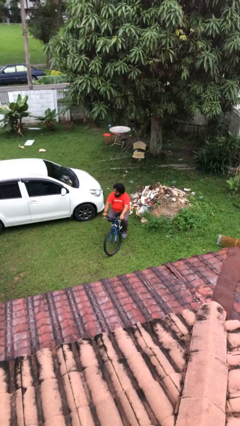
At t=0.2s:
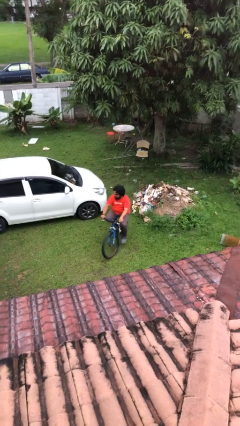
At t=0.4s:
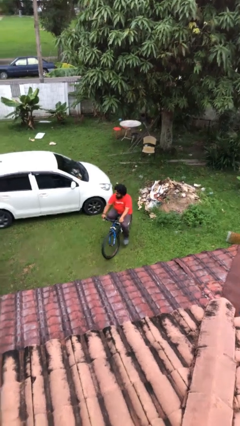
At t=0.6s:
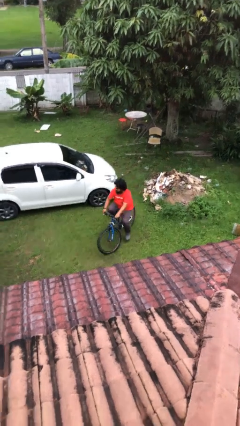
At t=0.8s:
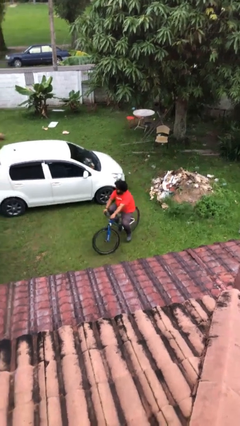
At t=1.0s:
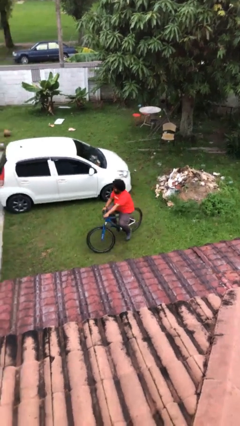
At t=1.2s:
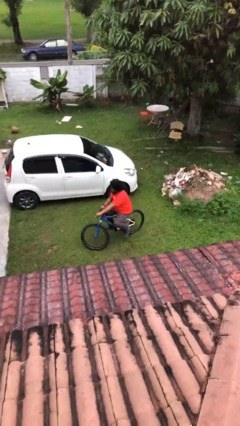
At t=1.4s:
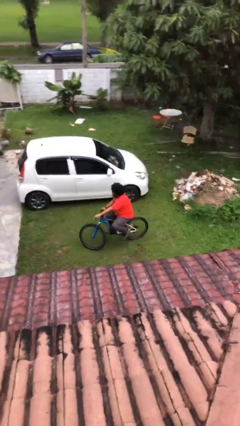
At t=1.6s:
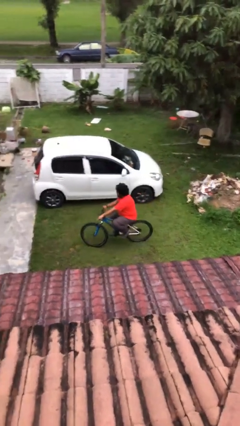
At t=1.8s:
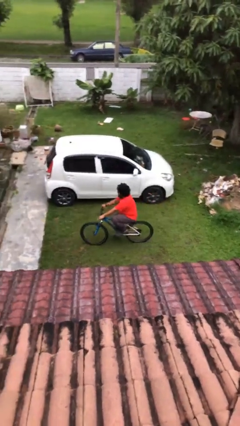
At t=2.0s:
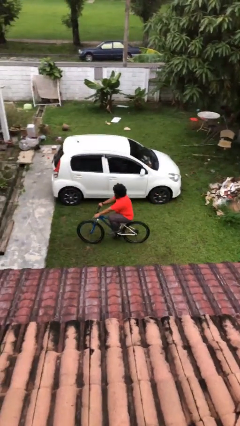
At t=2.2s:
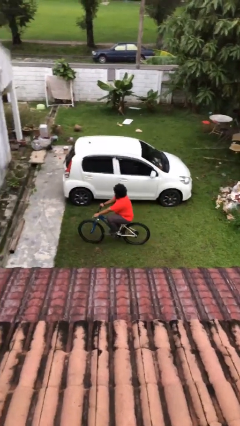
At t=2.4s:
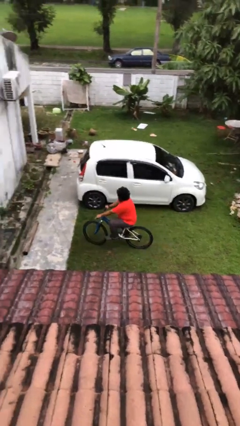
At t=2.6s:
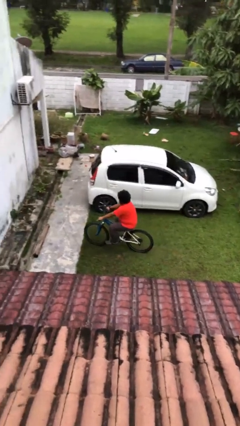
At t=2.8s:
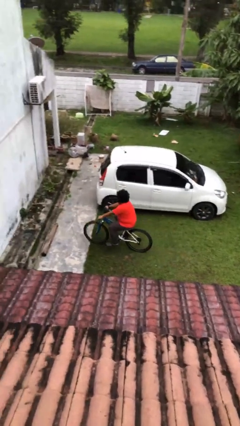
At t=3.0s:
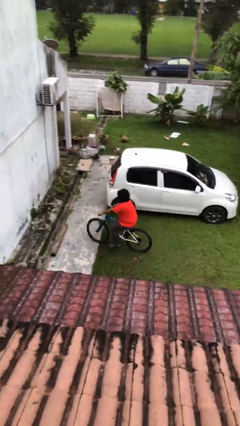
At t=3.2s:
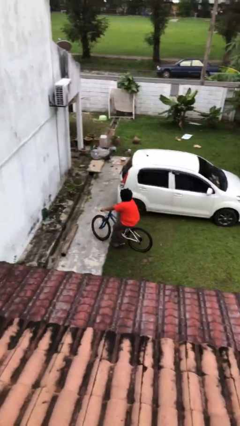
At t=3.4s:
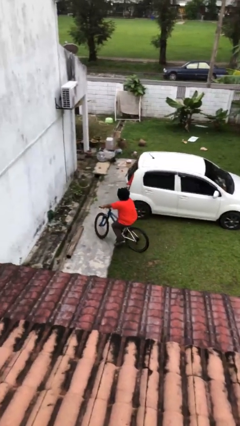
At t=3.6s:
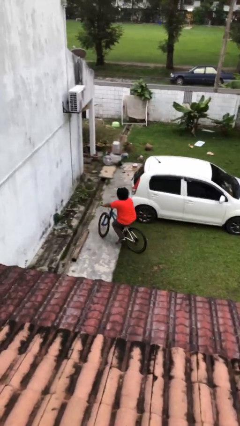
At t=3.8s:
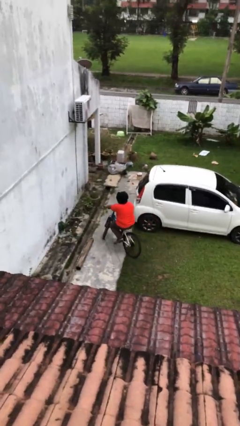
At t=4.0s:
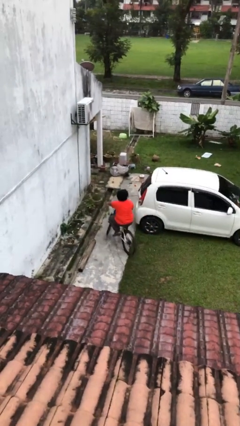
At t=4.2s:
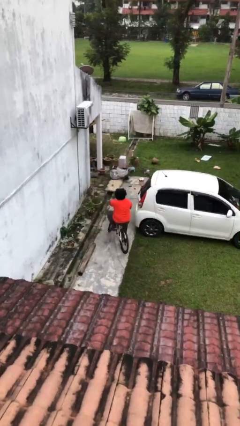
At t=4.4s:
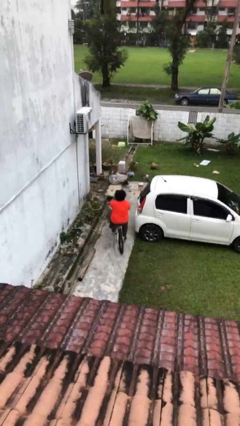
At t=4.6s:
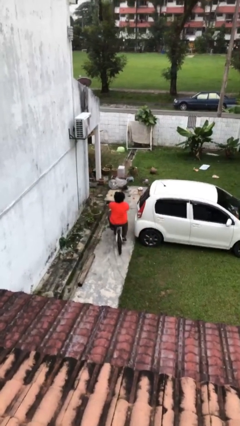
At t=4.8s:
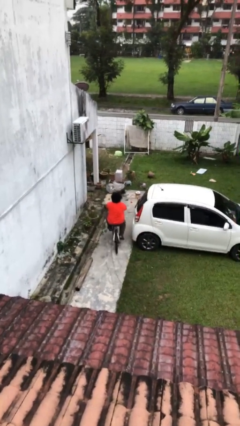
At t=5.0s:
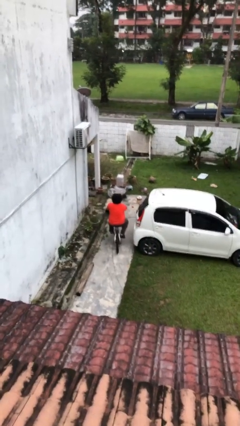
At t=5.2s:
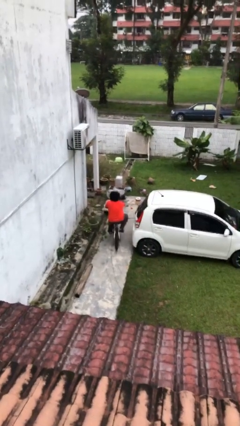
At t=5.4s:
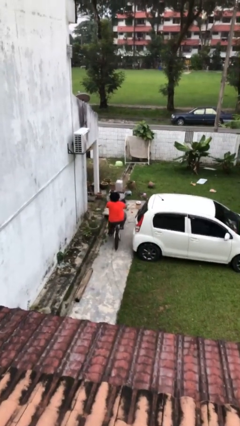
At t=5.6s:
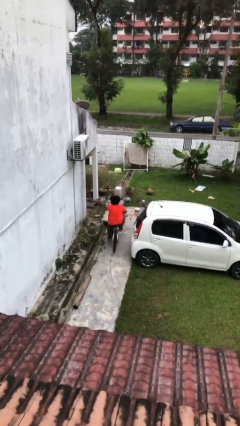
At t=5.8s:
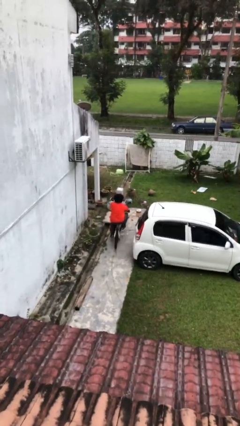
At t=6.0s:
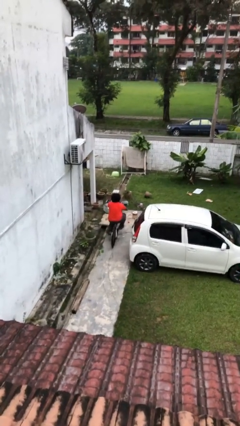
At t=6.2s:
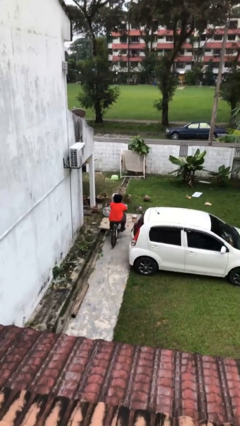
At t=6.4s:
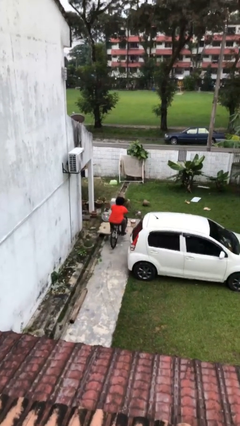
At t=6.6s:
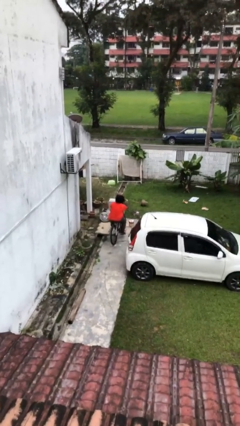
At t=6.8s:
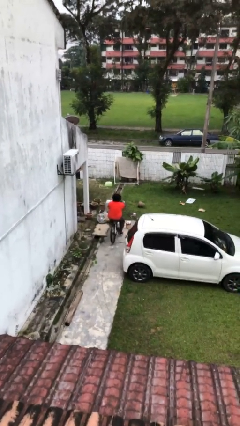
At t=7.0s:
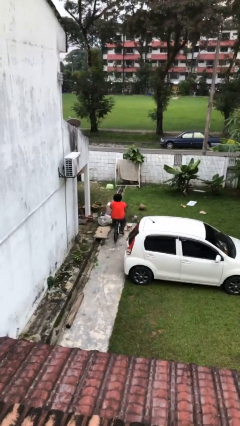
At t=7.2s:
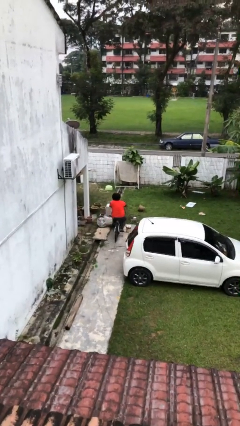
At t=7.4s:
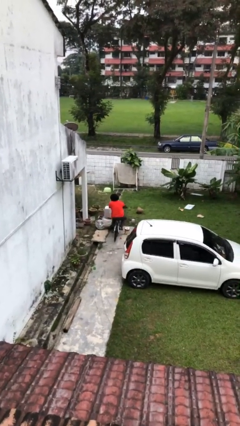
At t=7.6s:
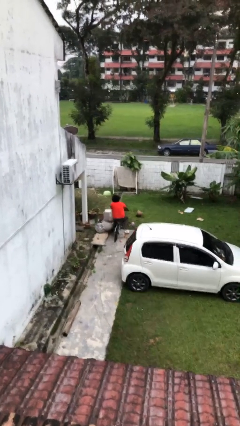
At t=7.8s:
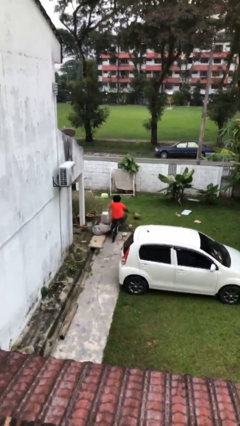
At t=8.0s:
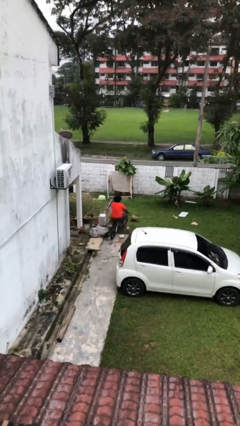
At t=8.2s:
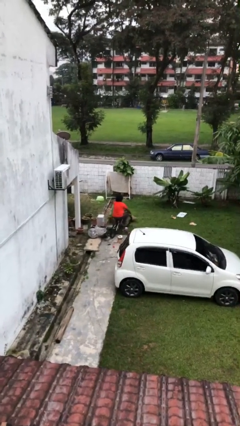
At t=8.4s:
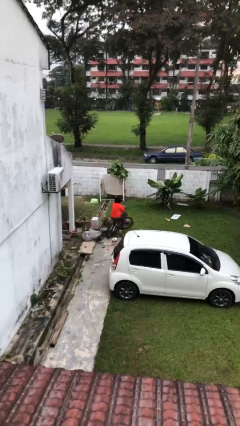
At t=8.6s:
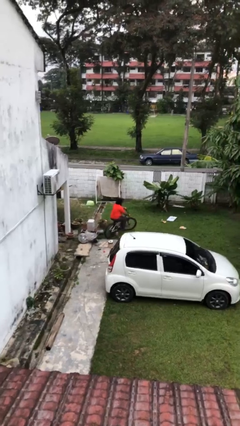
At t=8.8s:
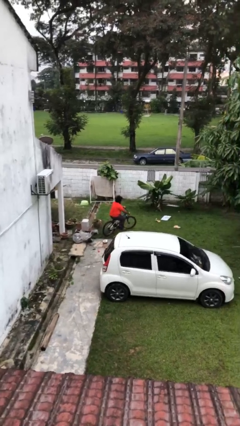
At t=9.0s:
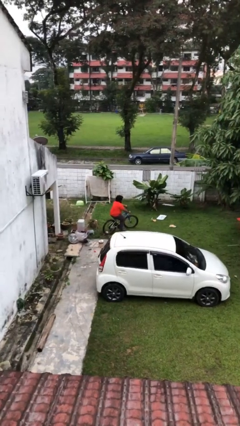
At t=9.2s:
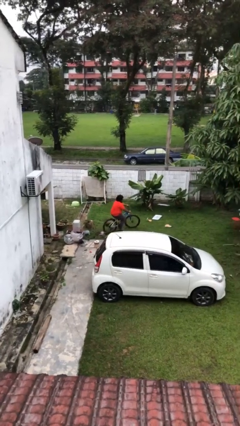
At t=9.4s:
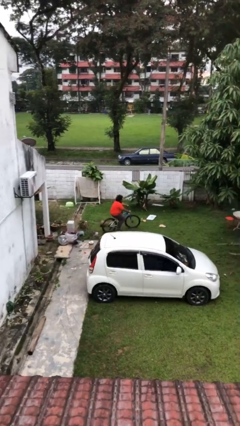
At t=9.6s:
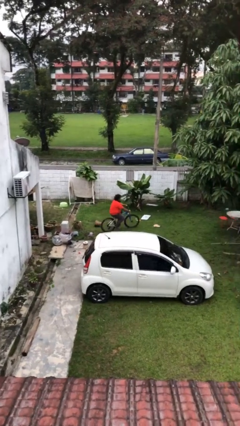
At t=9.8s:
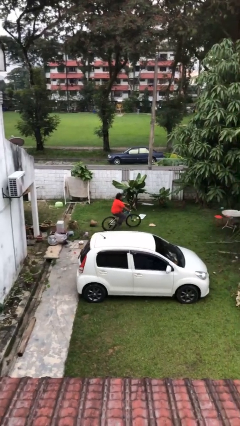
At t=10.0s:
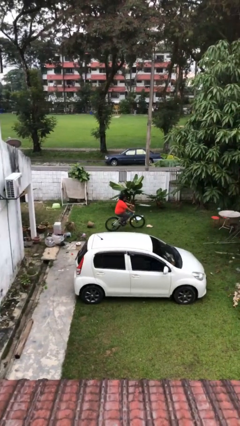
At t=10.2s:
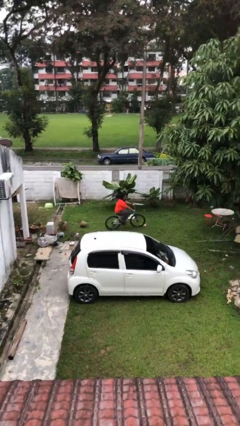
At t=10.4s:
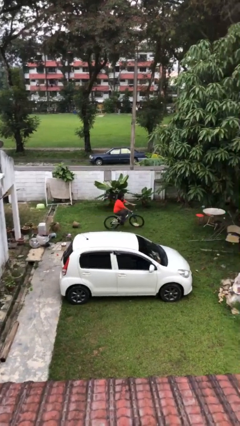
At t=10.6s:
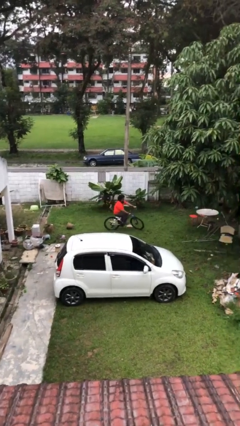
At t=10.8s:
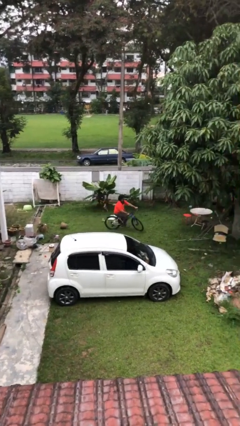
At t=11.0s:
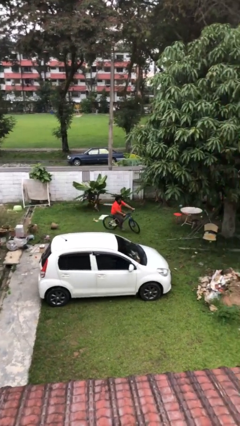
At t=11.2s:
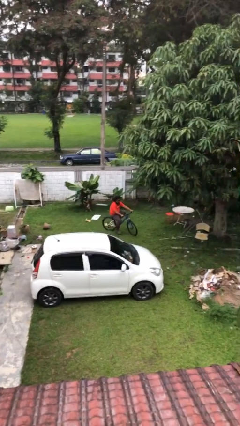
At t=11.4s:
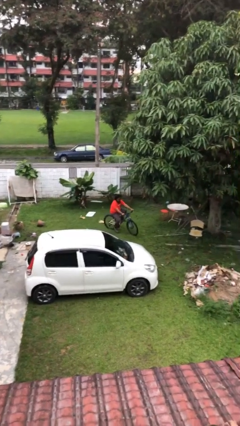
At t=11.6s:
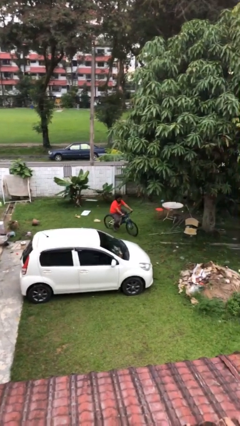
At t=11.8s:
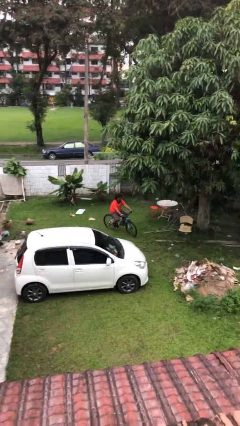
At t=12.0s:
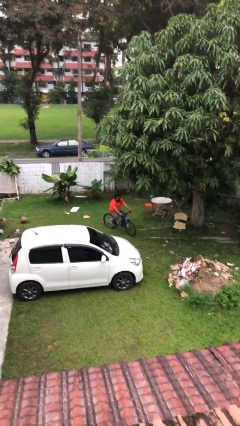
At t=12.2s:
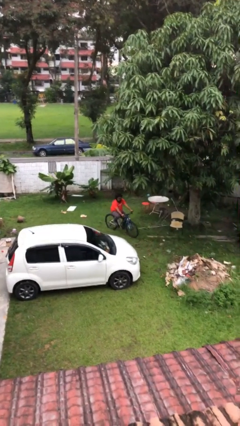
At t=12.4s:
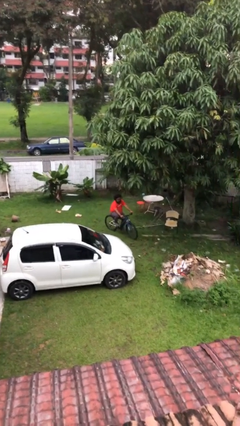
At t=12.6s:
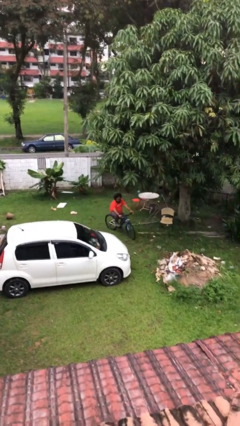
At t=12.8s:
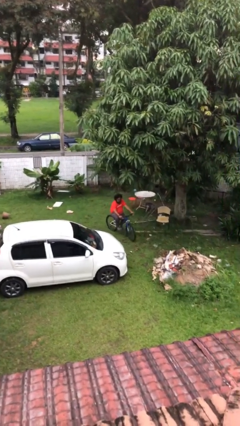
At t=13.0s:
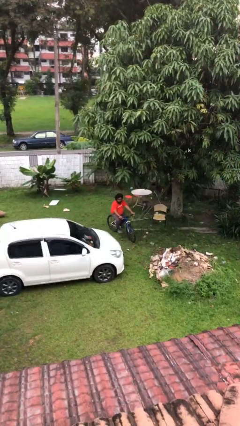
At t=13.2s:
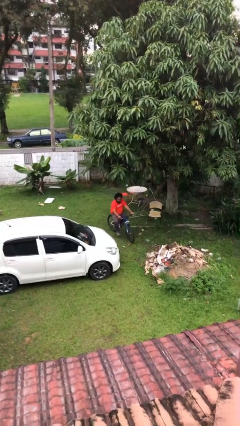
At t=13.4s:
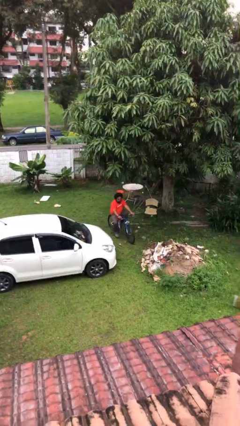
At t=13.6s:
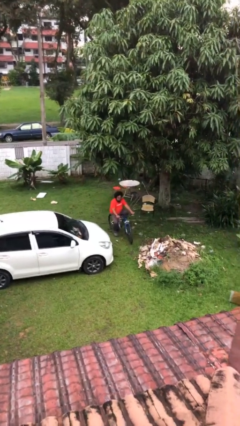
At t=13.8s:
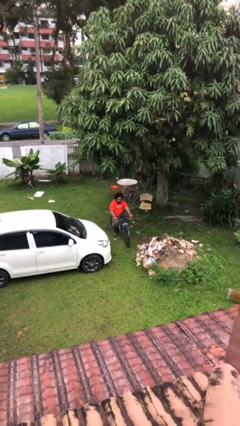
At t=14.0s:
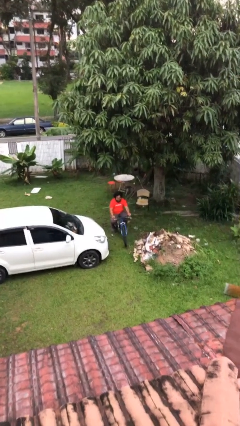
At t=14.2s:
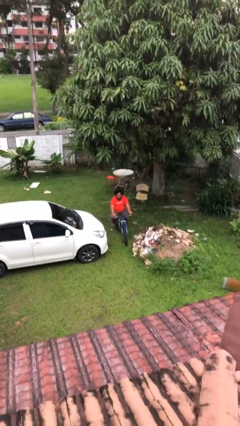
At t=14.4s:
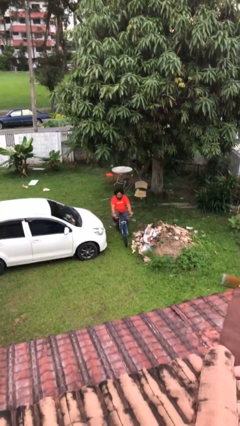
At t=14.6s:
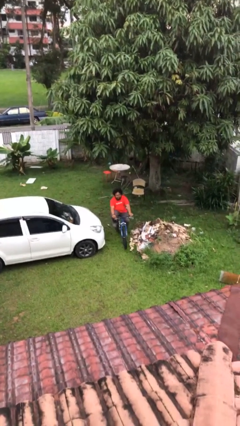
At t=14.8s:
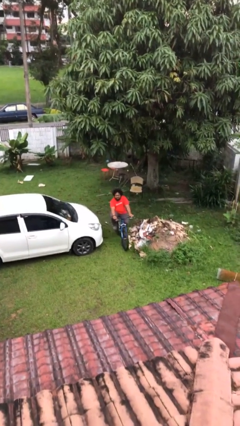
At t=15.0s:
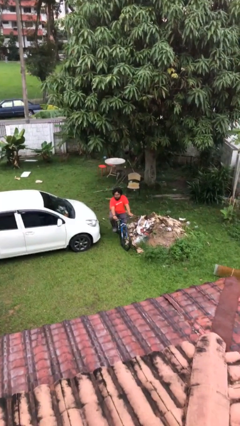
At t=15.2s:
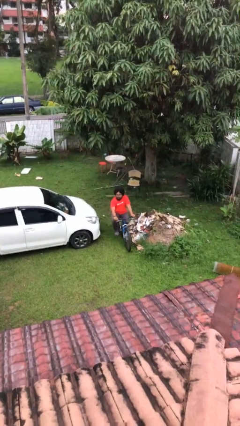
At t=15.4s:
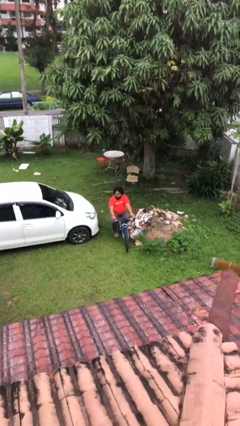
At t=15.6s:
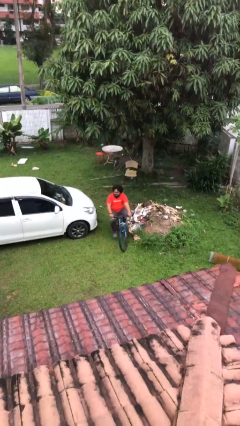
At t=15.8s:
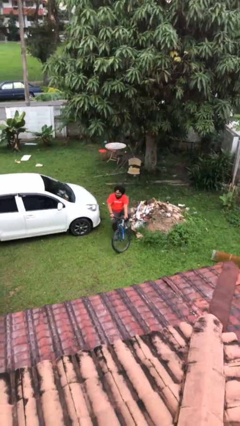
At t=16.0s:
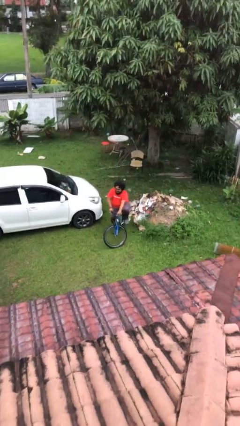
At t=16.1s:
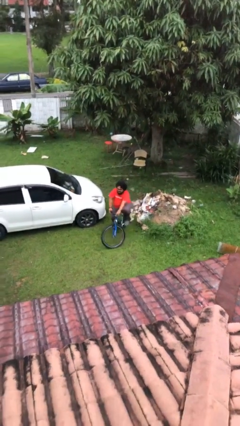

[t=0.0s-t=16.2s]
person rides bicycle

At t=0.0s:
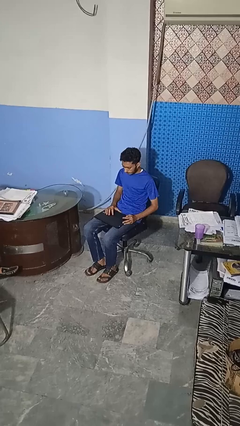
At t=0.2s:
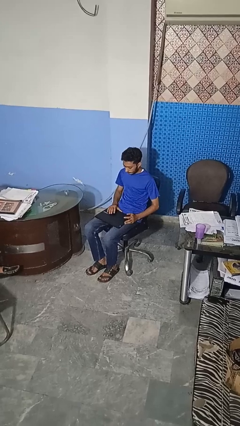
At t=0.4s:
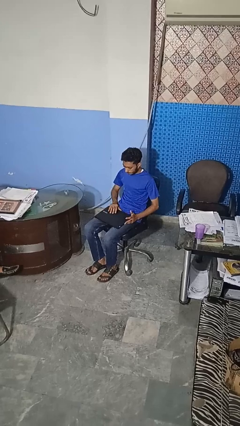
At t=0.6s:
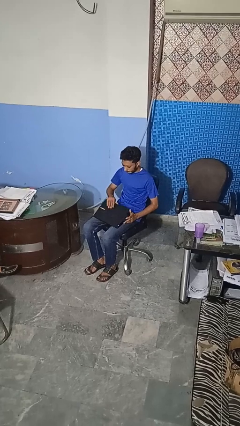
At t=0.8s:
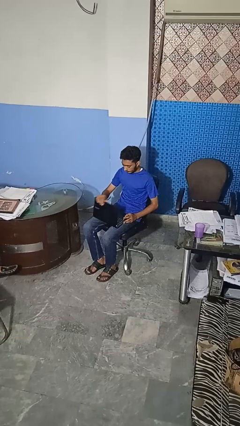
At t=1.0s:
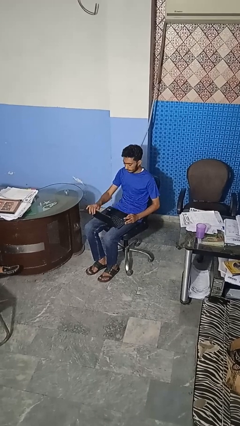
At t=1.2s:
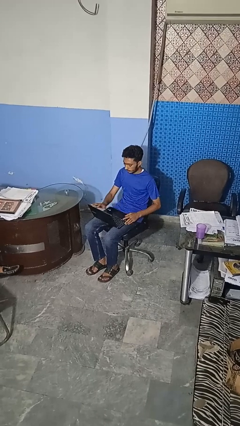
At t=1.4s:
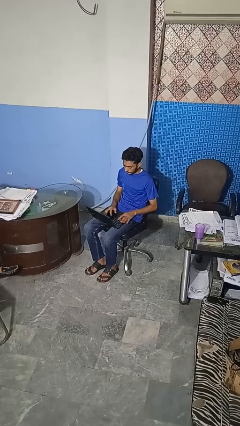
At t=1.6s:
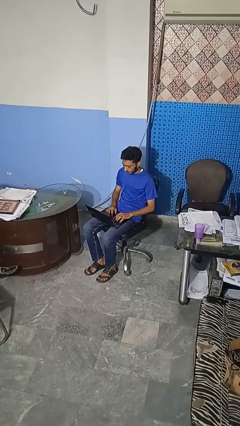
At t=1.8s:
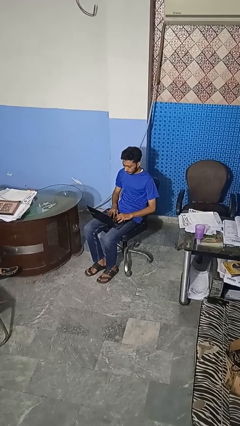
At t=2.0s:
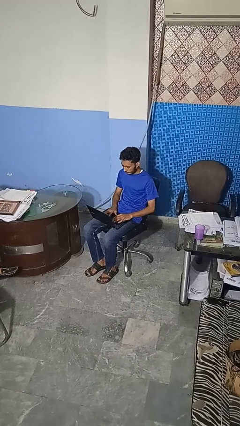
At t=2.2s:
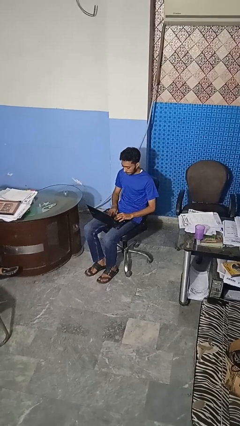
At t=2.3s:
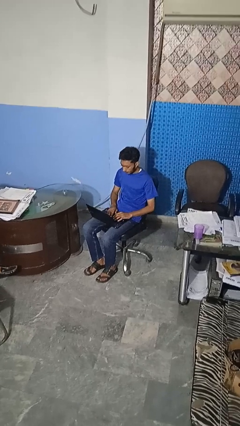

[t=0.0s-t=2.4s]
person opens laptop
